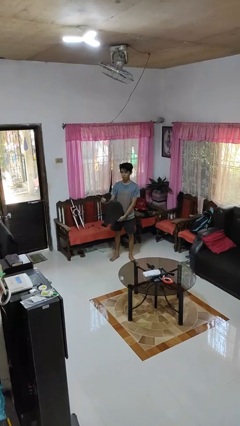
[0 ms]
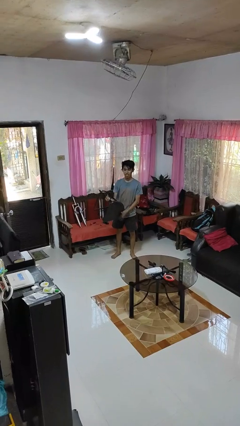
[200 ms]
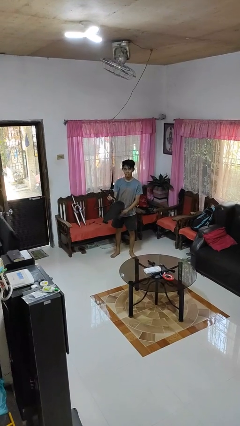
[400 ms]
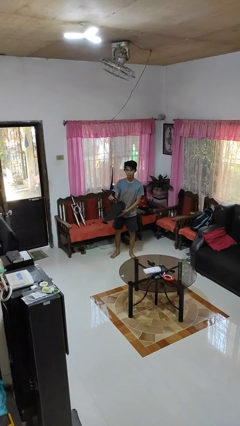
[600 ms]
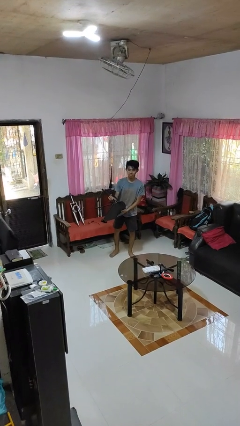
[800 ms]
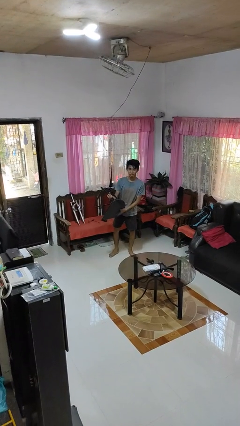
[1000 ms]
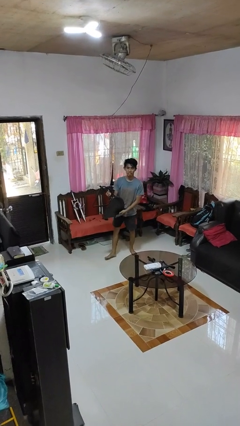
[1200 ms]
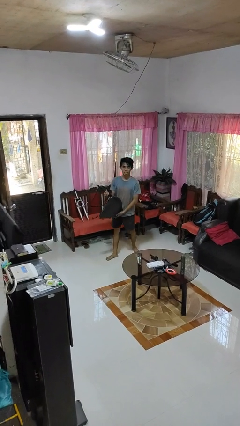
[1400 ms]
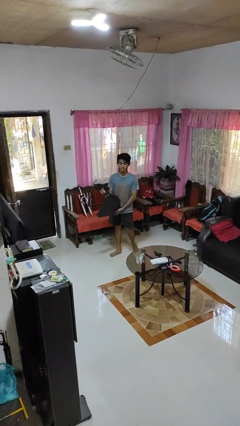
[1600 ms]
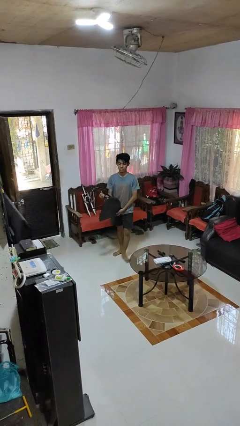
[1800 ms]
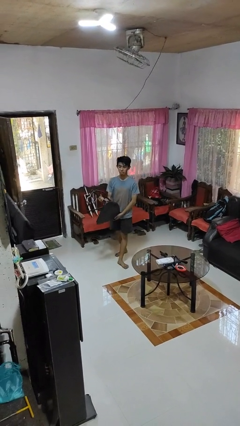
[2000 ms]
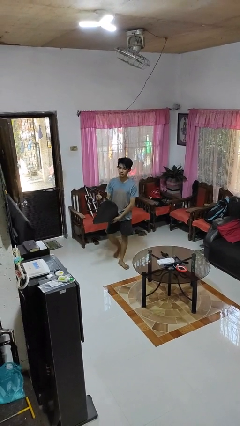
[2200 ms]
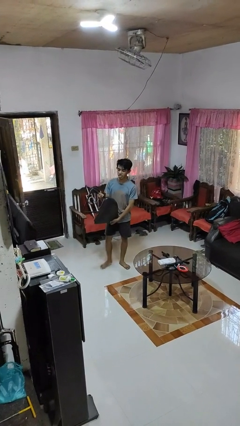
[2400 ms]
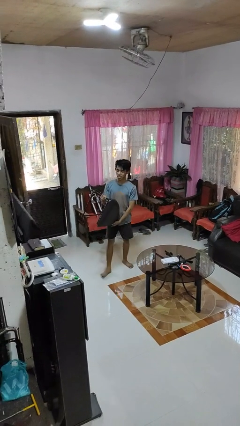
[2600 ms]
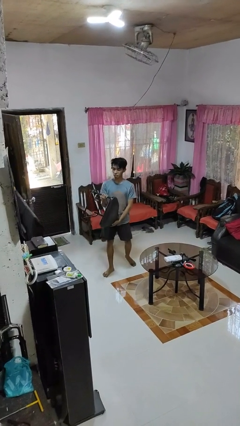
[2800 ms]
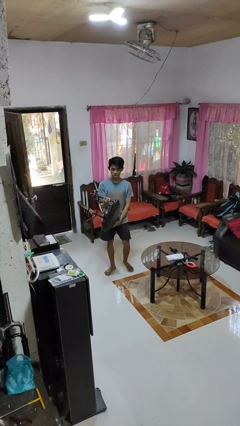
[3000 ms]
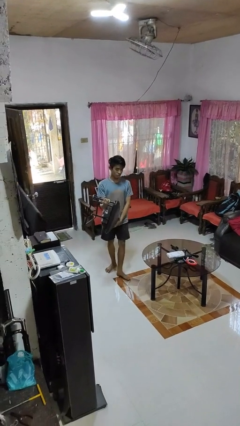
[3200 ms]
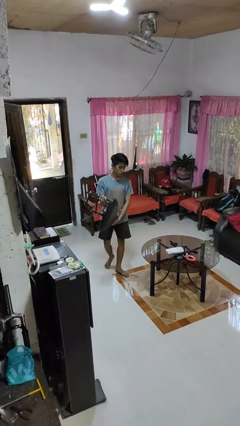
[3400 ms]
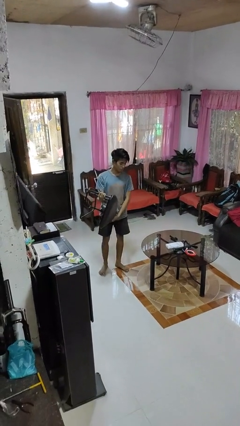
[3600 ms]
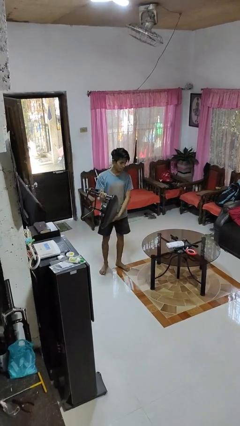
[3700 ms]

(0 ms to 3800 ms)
person carries furniture

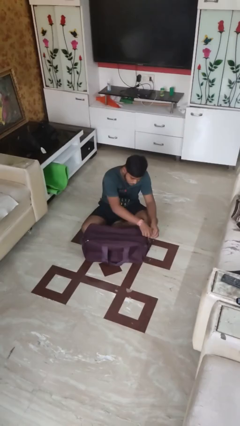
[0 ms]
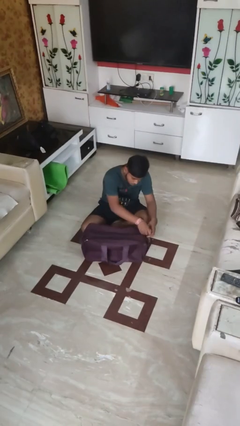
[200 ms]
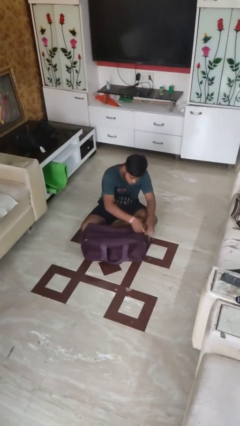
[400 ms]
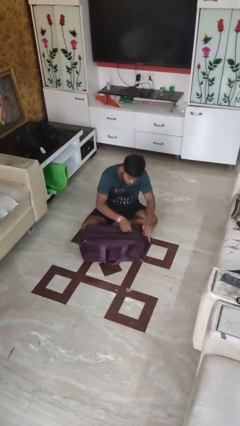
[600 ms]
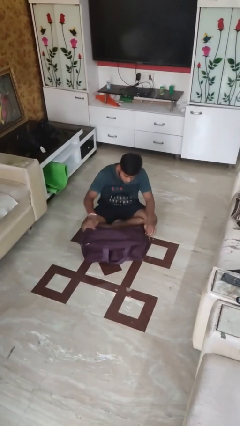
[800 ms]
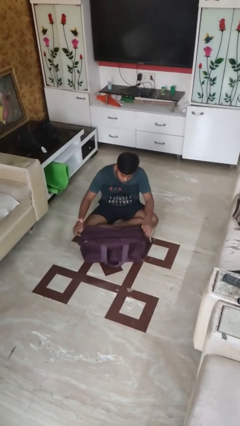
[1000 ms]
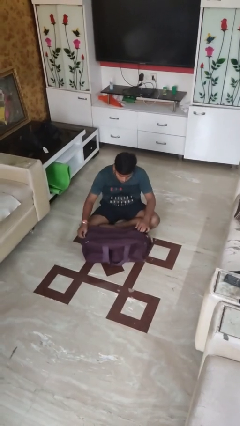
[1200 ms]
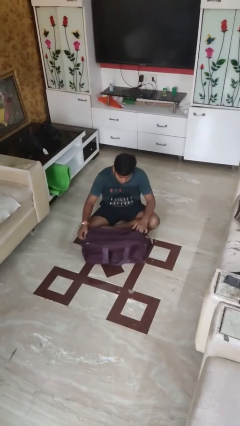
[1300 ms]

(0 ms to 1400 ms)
person opens suitcase

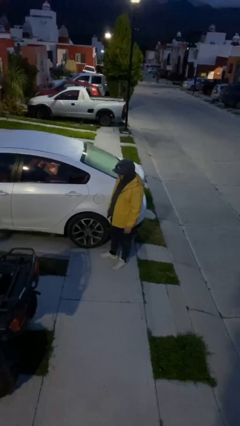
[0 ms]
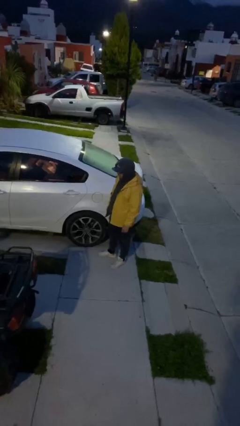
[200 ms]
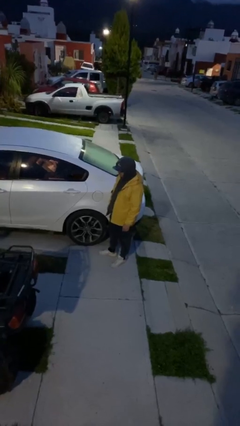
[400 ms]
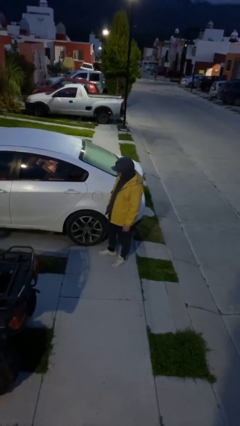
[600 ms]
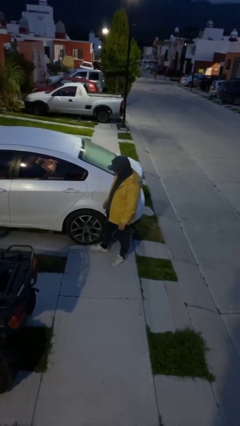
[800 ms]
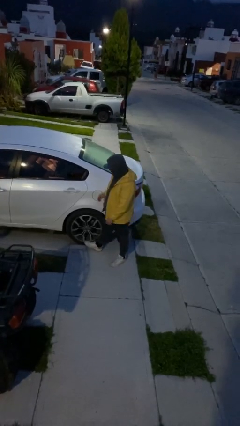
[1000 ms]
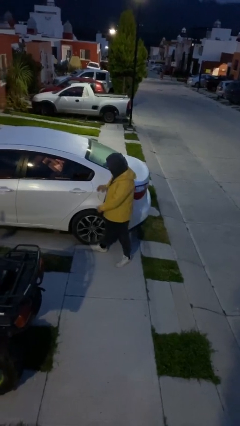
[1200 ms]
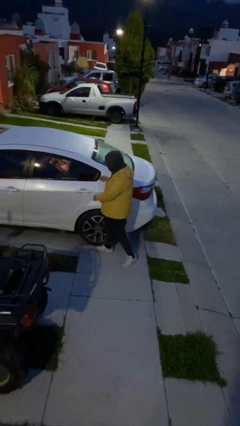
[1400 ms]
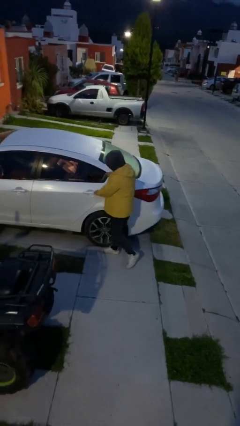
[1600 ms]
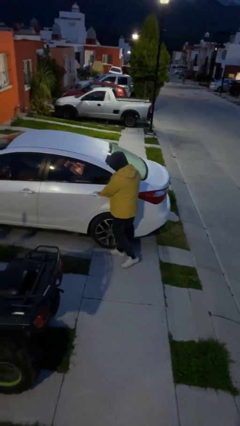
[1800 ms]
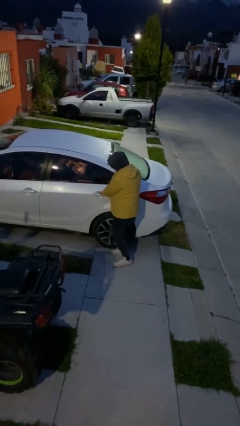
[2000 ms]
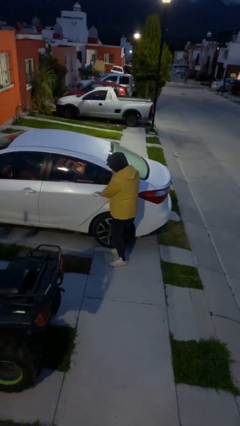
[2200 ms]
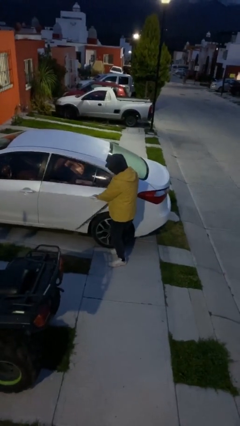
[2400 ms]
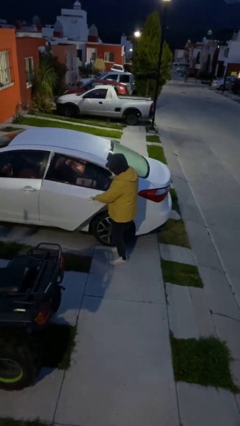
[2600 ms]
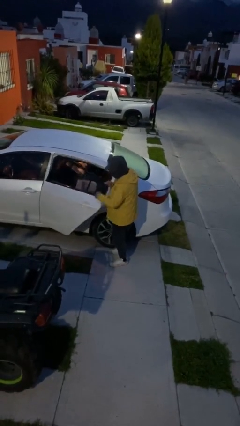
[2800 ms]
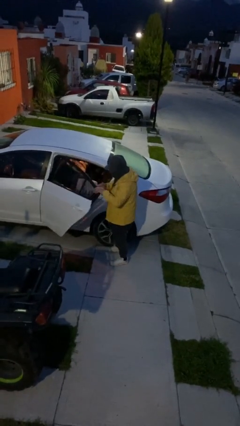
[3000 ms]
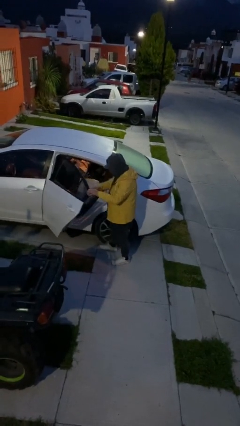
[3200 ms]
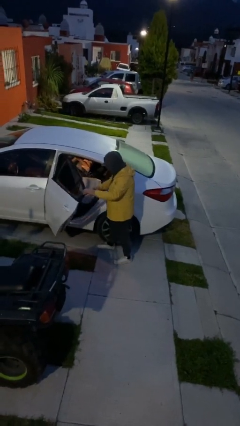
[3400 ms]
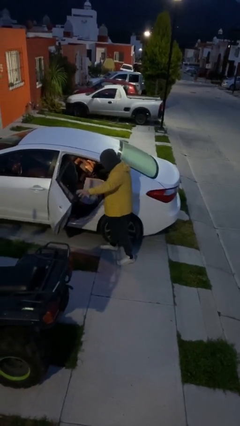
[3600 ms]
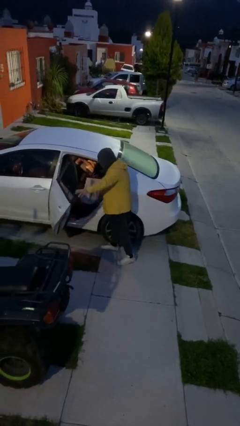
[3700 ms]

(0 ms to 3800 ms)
person opens car door

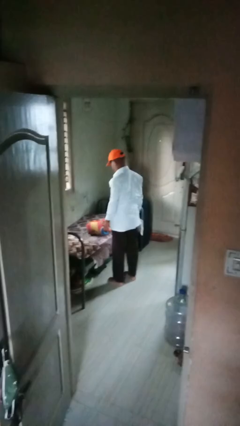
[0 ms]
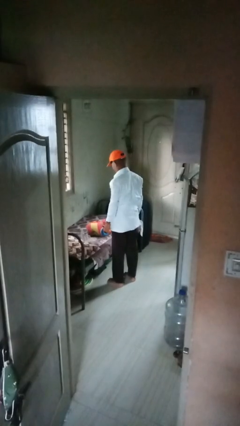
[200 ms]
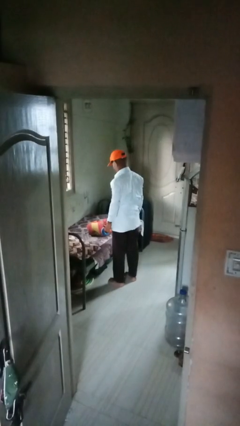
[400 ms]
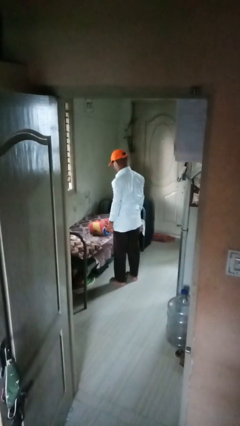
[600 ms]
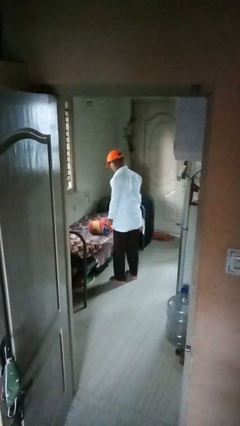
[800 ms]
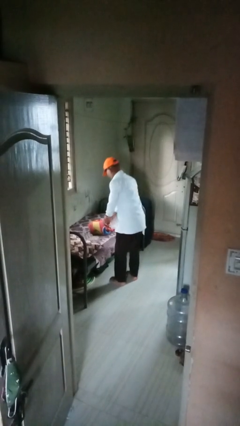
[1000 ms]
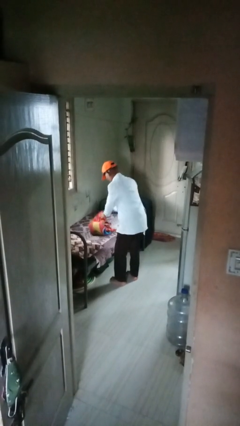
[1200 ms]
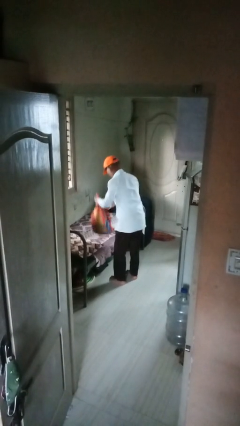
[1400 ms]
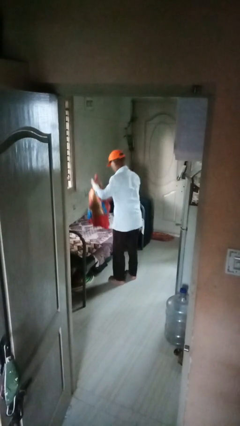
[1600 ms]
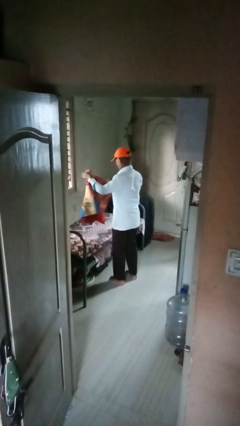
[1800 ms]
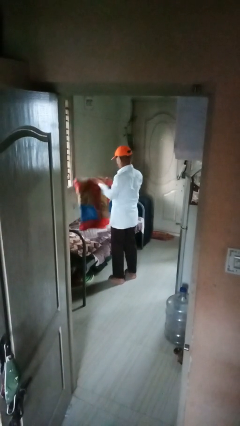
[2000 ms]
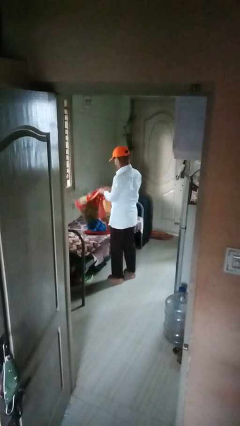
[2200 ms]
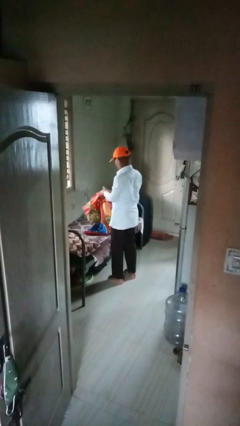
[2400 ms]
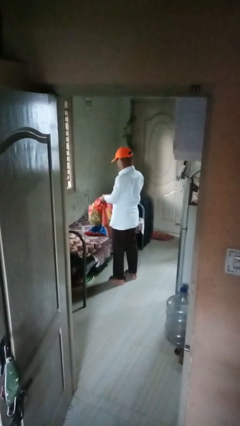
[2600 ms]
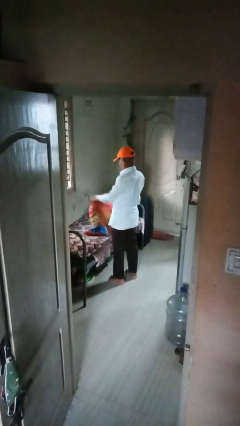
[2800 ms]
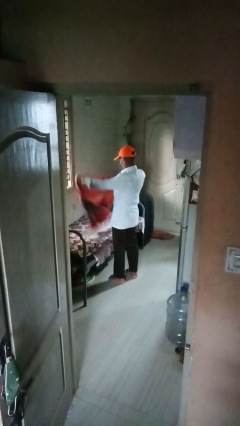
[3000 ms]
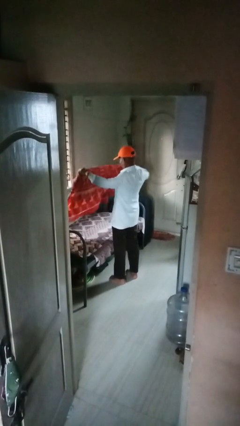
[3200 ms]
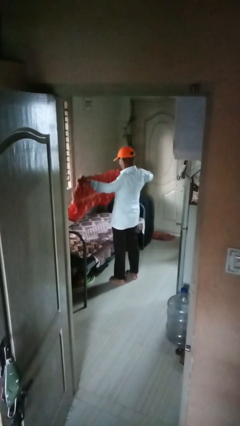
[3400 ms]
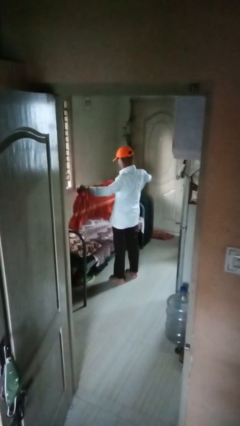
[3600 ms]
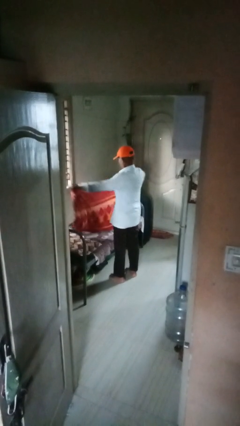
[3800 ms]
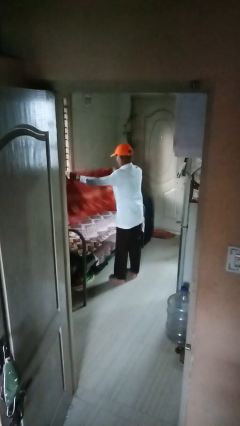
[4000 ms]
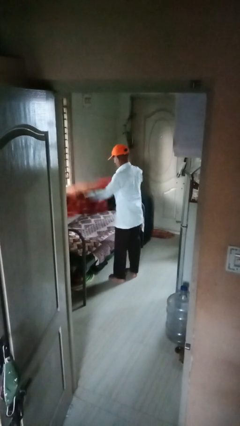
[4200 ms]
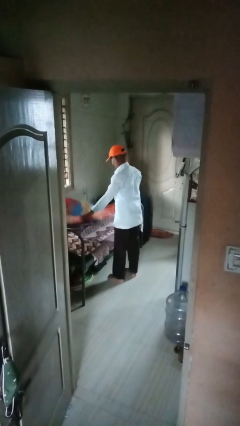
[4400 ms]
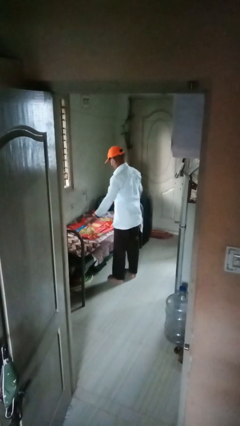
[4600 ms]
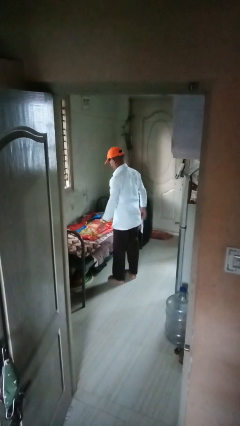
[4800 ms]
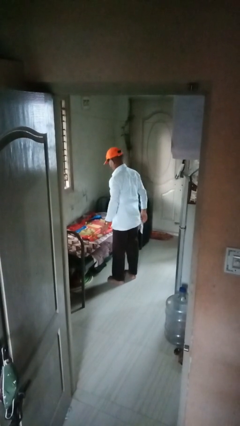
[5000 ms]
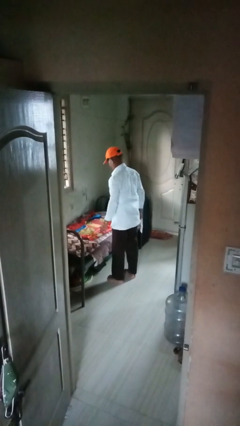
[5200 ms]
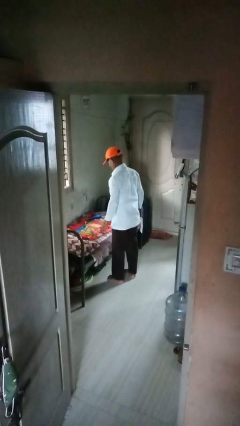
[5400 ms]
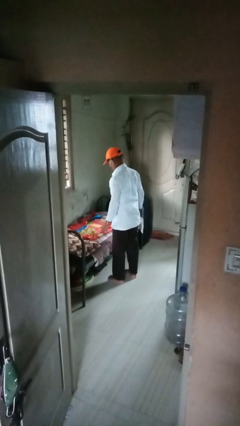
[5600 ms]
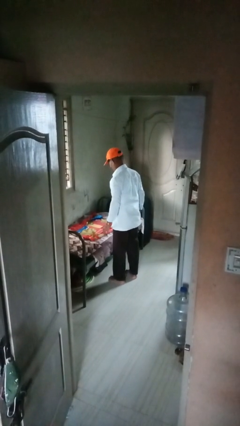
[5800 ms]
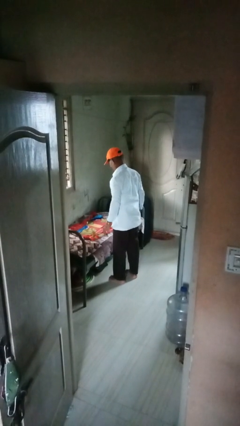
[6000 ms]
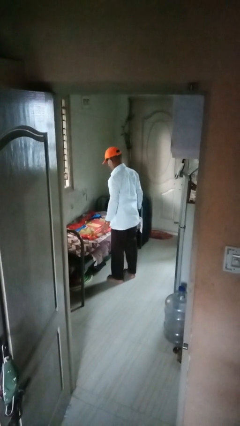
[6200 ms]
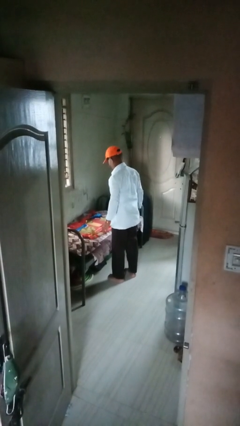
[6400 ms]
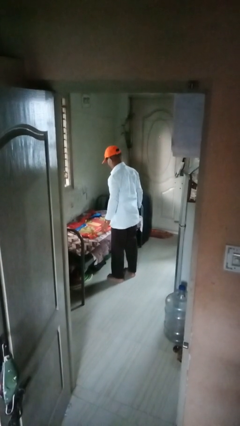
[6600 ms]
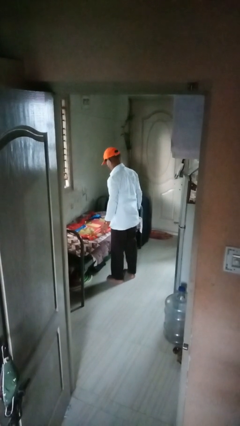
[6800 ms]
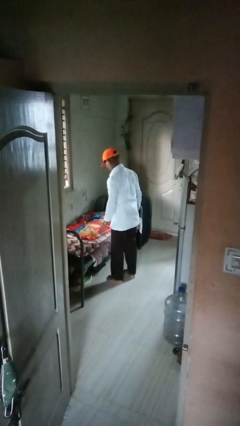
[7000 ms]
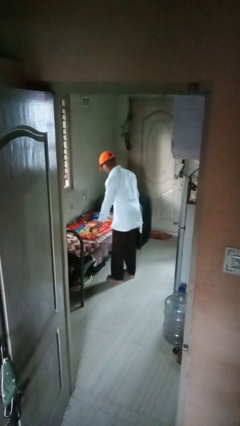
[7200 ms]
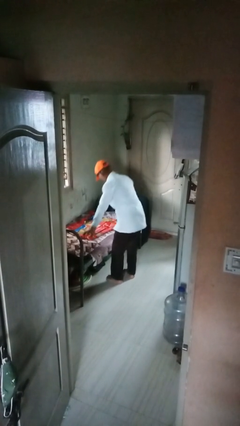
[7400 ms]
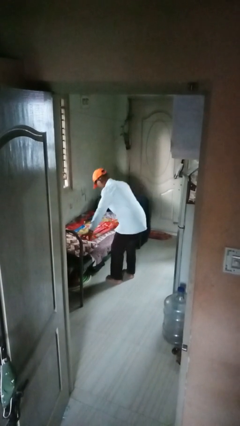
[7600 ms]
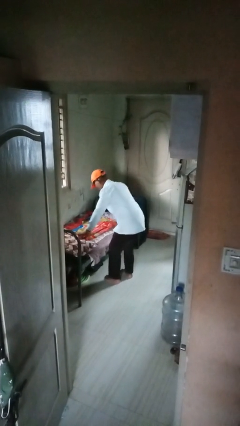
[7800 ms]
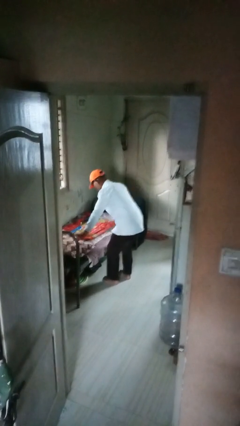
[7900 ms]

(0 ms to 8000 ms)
person unfolds blanket

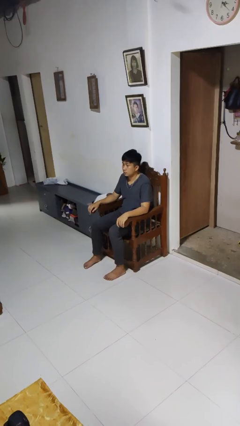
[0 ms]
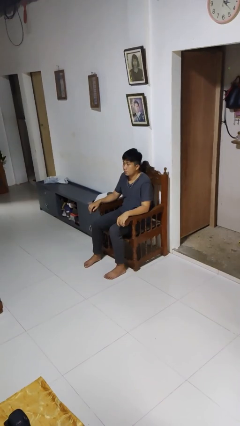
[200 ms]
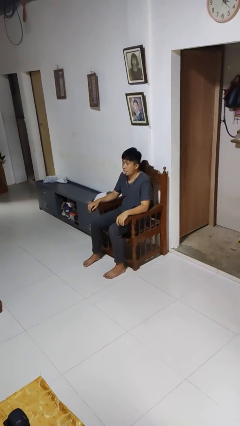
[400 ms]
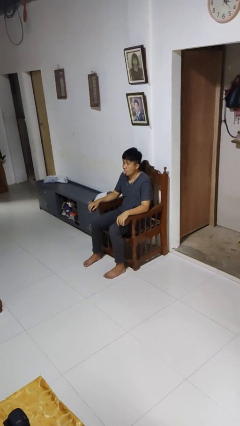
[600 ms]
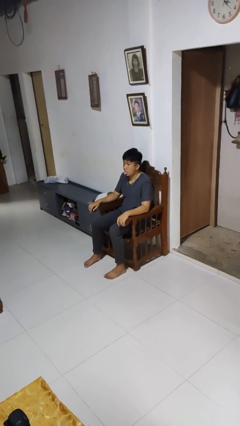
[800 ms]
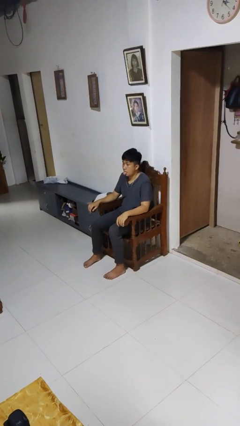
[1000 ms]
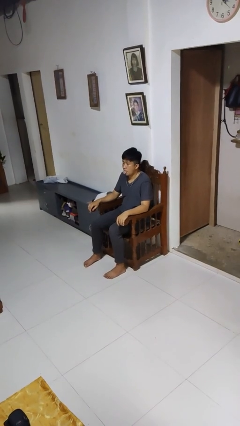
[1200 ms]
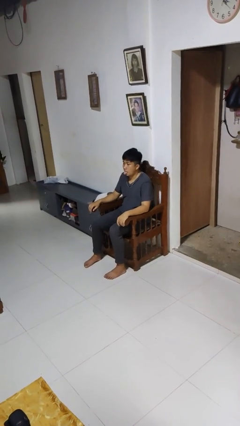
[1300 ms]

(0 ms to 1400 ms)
person sticks out tongue
